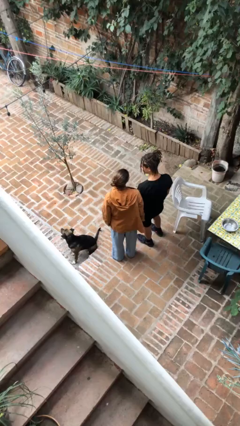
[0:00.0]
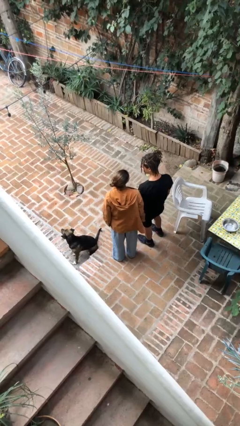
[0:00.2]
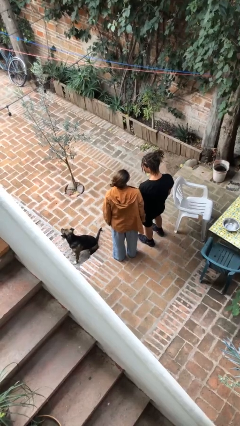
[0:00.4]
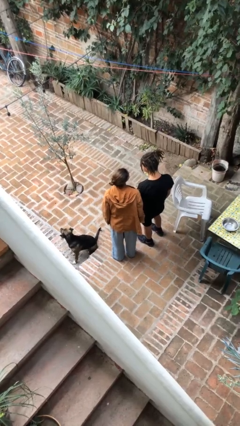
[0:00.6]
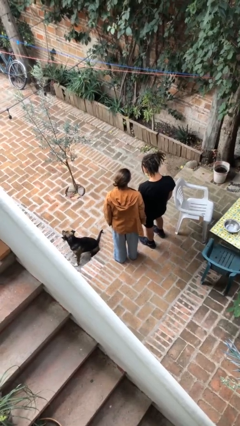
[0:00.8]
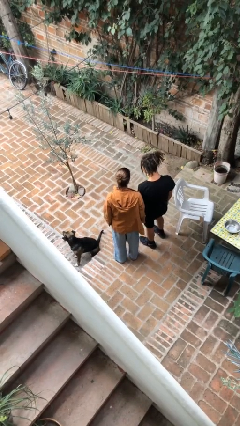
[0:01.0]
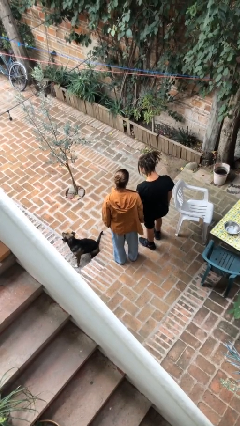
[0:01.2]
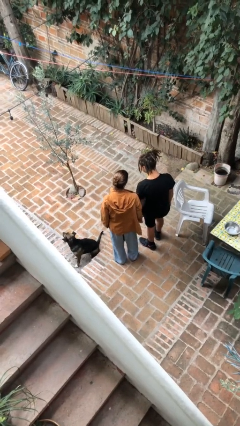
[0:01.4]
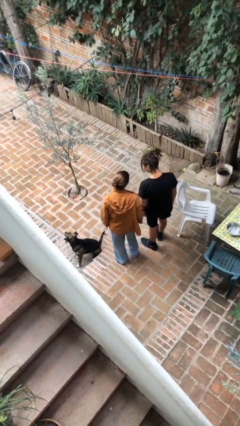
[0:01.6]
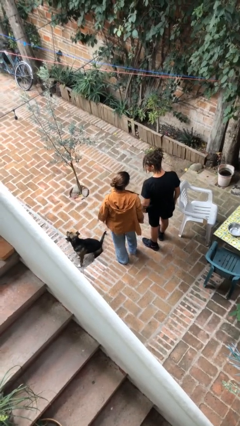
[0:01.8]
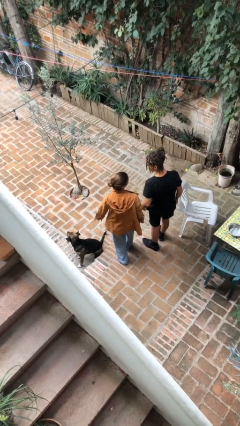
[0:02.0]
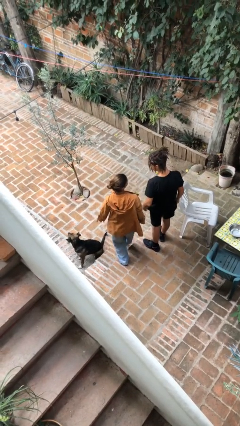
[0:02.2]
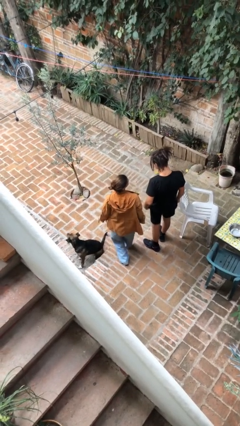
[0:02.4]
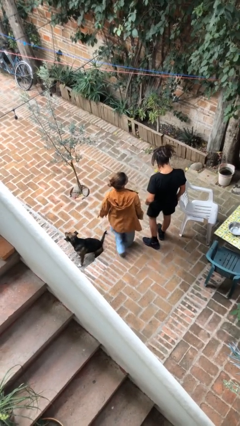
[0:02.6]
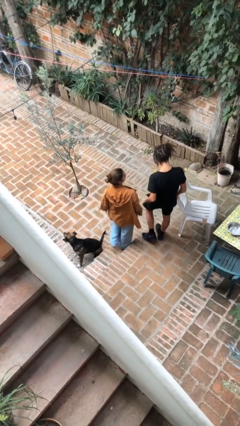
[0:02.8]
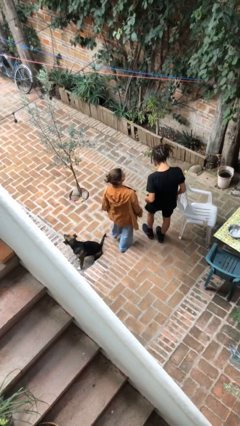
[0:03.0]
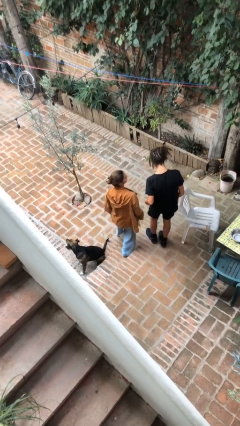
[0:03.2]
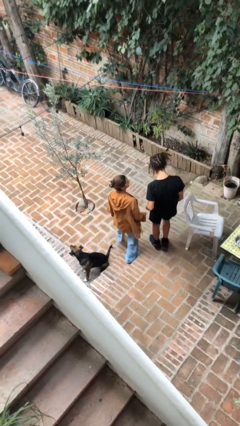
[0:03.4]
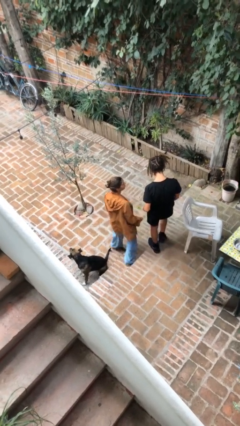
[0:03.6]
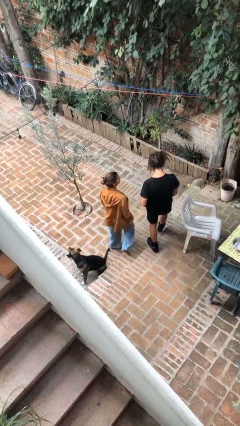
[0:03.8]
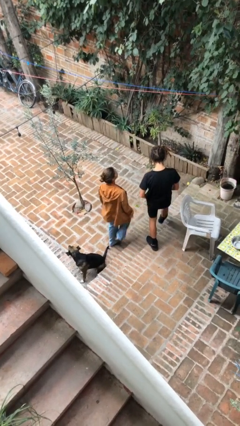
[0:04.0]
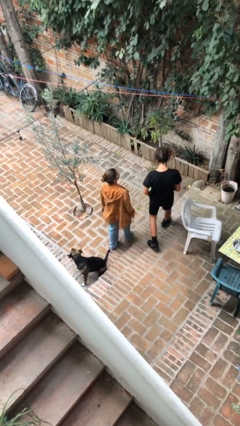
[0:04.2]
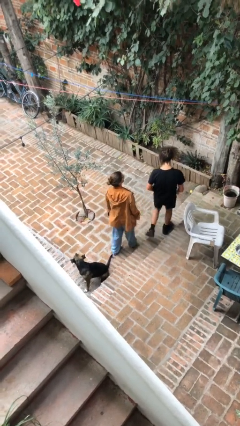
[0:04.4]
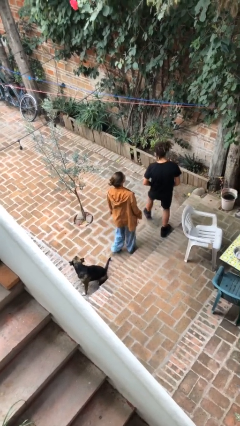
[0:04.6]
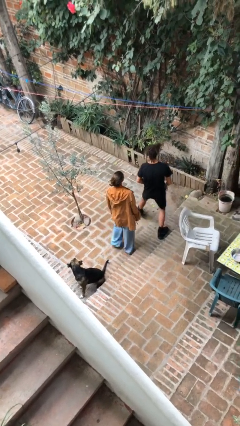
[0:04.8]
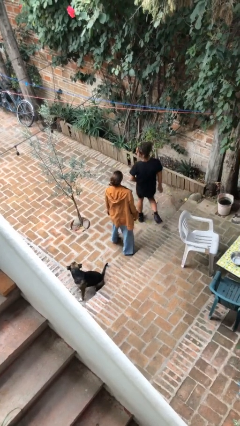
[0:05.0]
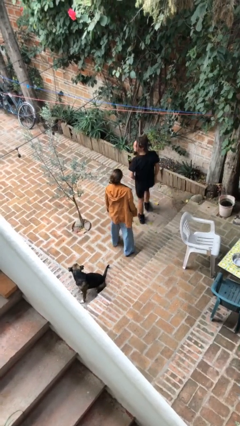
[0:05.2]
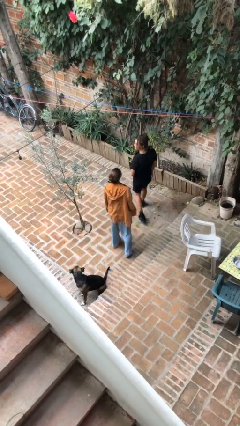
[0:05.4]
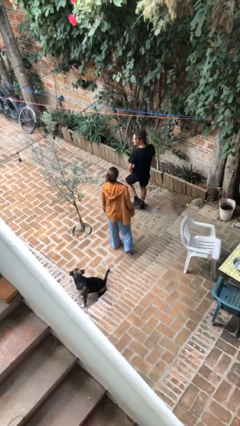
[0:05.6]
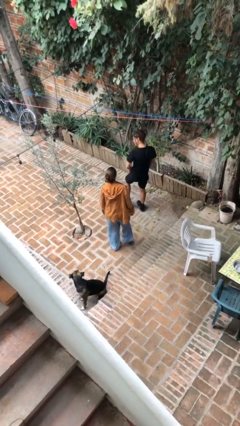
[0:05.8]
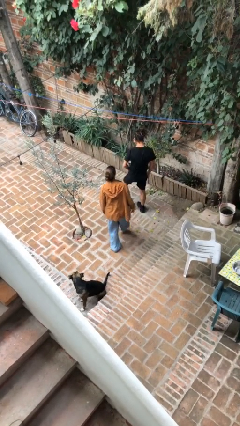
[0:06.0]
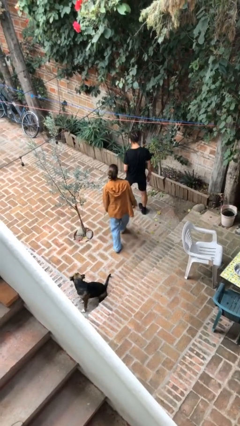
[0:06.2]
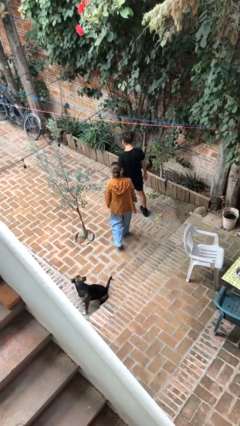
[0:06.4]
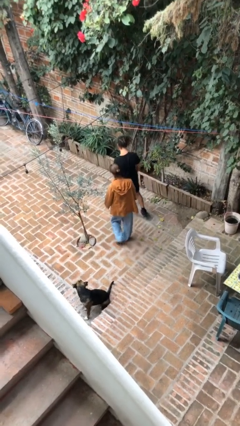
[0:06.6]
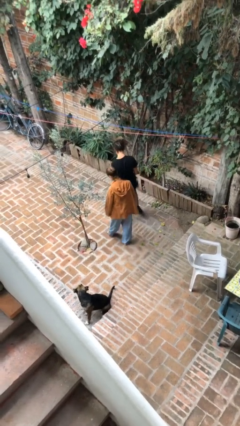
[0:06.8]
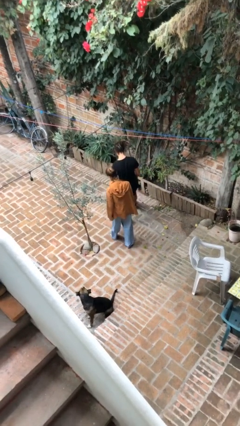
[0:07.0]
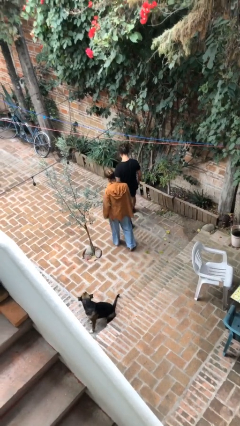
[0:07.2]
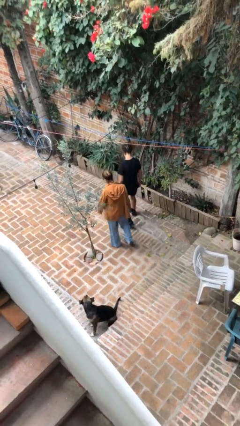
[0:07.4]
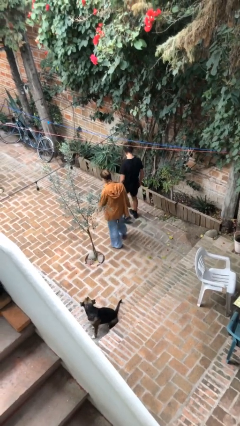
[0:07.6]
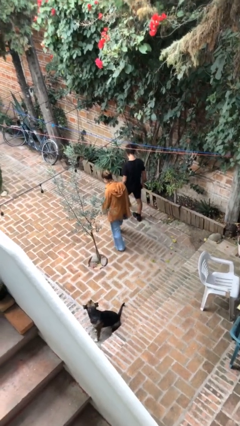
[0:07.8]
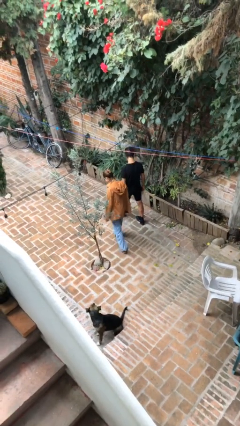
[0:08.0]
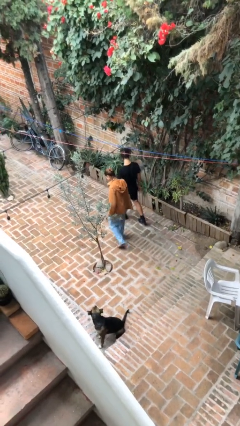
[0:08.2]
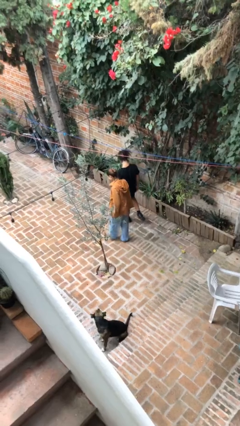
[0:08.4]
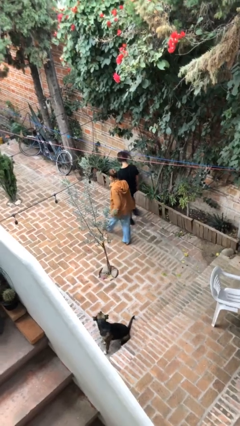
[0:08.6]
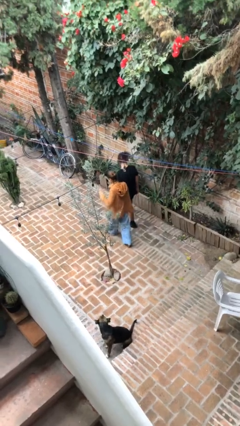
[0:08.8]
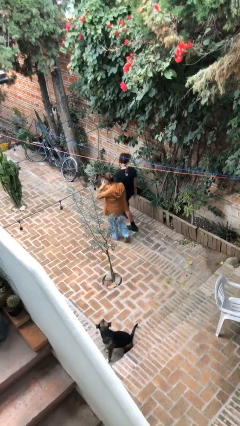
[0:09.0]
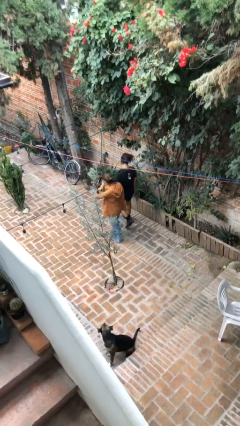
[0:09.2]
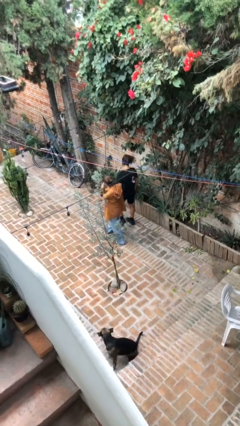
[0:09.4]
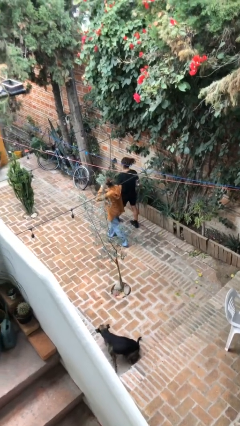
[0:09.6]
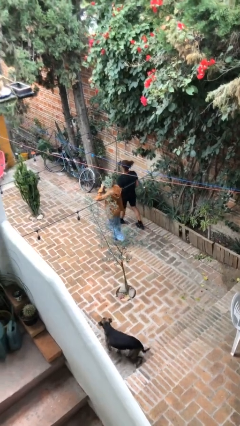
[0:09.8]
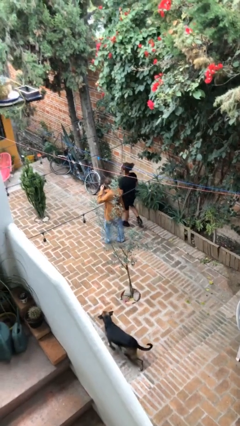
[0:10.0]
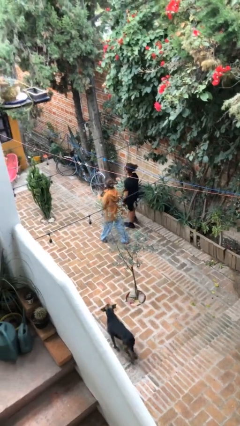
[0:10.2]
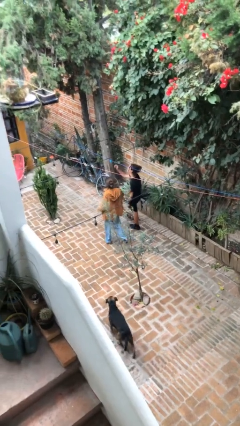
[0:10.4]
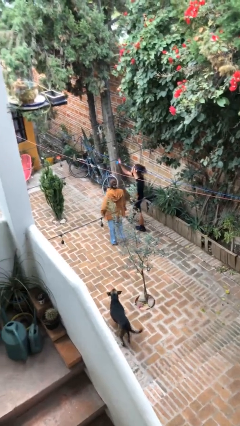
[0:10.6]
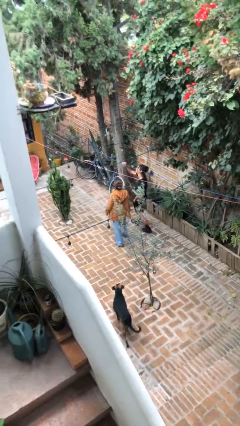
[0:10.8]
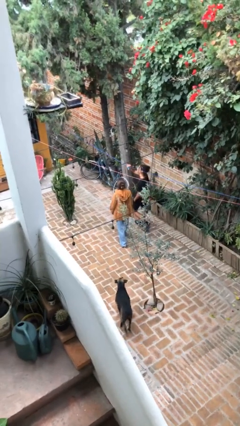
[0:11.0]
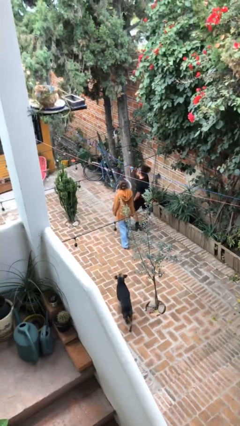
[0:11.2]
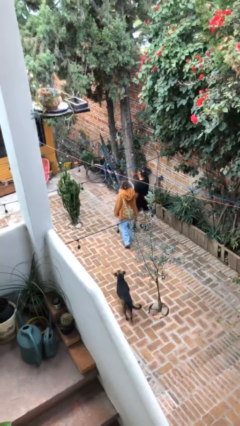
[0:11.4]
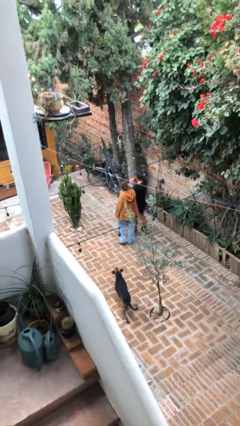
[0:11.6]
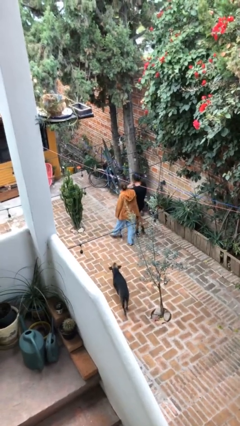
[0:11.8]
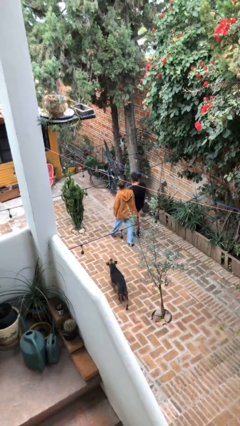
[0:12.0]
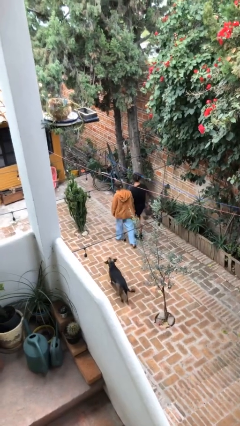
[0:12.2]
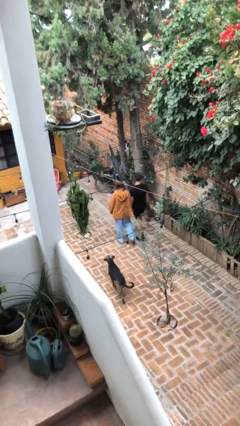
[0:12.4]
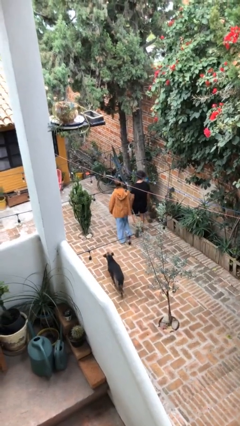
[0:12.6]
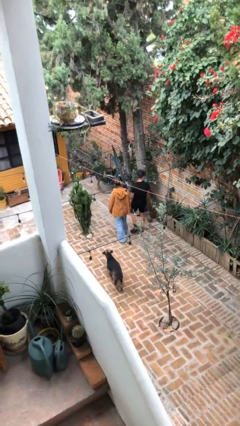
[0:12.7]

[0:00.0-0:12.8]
person talks to person

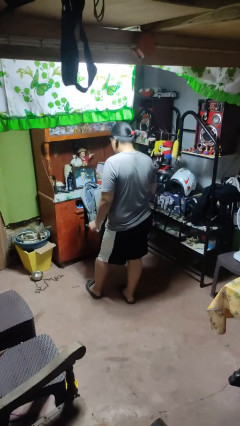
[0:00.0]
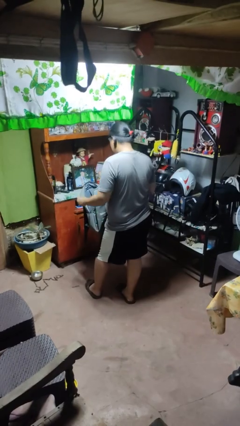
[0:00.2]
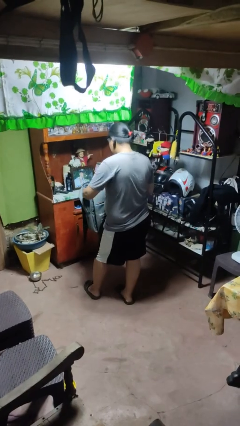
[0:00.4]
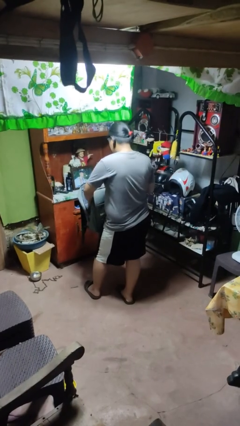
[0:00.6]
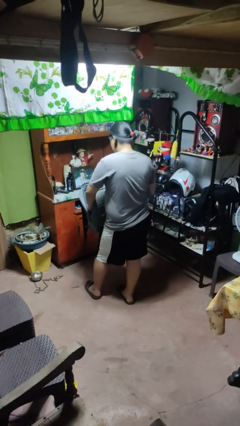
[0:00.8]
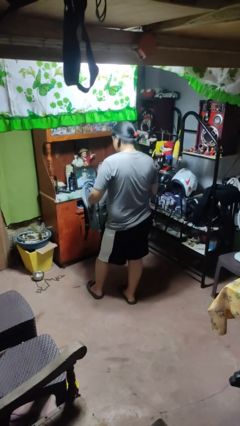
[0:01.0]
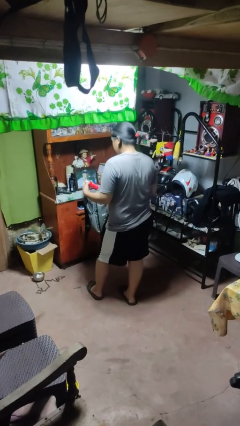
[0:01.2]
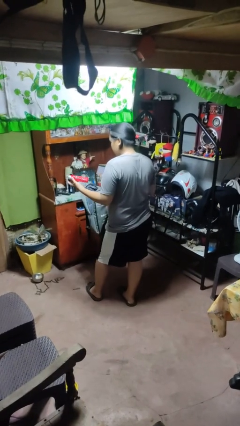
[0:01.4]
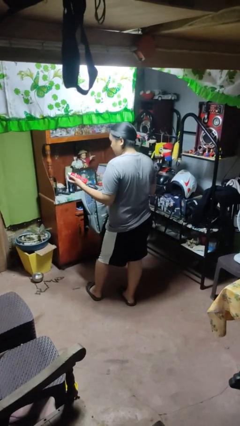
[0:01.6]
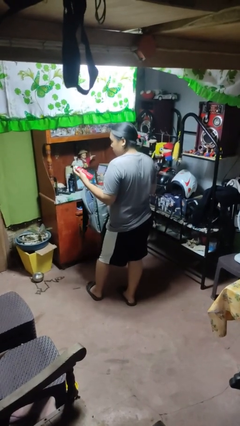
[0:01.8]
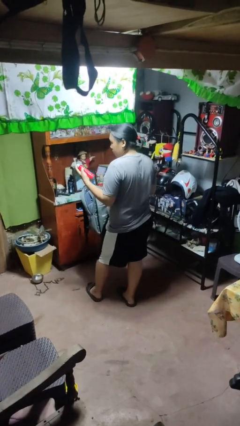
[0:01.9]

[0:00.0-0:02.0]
person takes object from bag

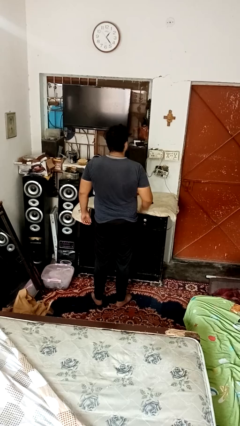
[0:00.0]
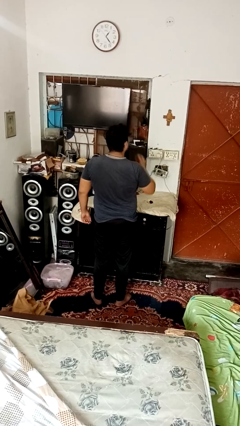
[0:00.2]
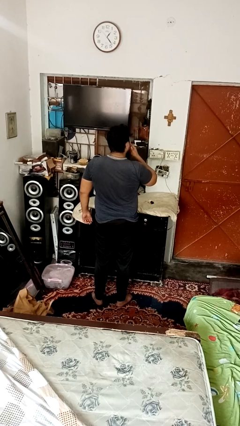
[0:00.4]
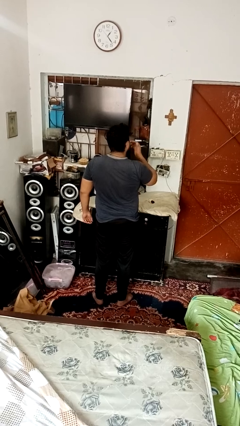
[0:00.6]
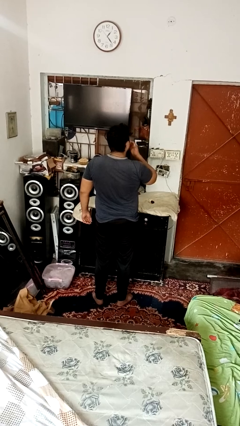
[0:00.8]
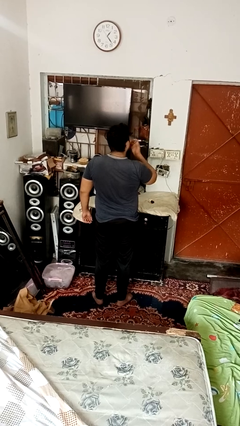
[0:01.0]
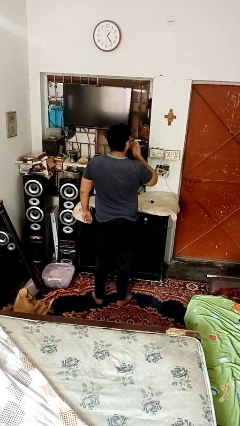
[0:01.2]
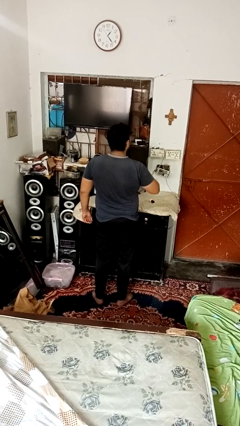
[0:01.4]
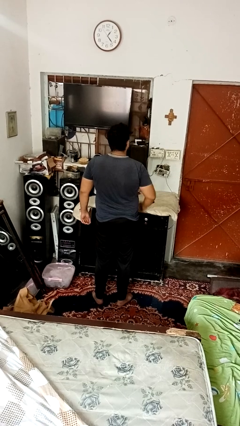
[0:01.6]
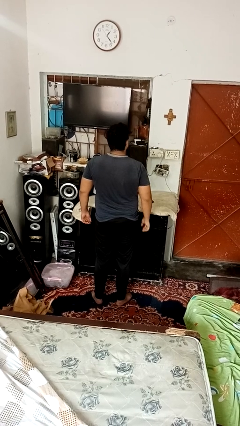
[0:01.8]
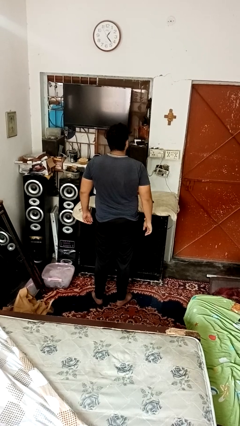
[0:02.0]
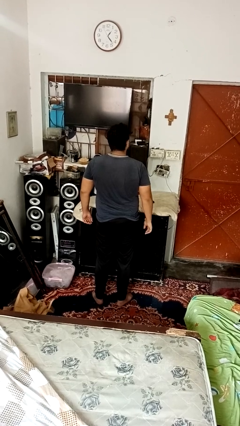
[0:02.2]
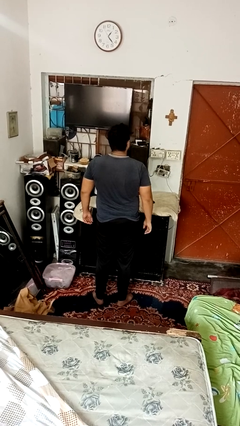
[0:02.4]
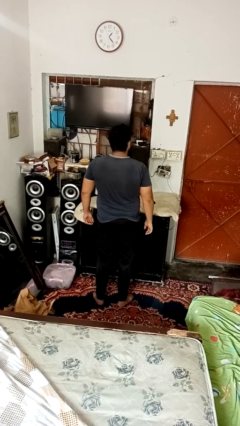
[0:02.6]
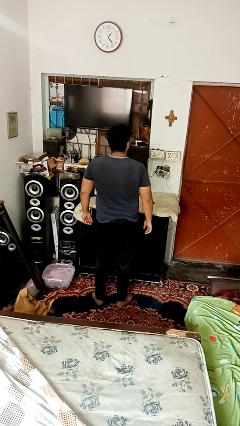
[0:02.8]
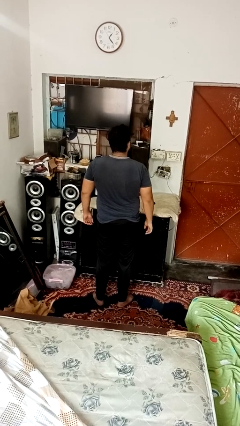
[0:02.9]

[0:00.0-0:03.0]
person licks fingers
